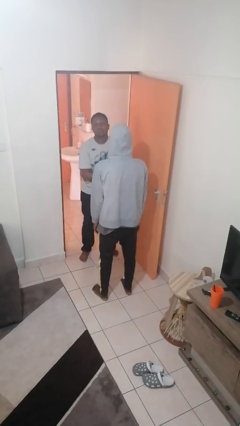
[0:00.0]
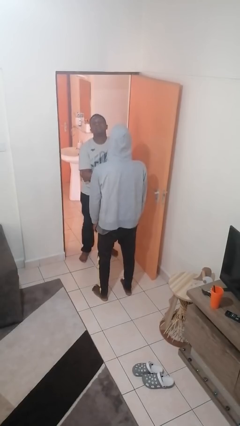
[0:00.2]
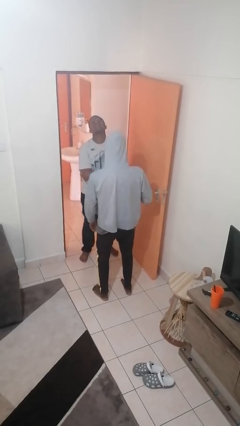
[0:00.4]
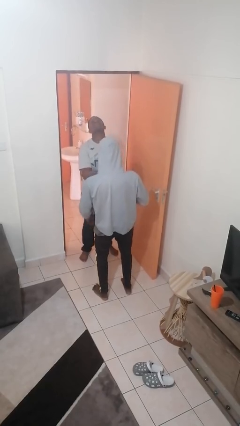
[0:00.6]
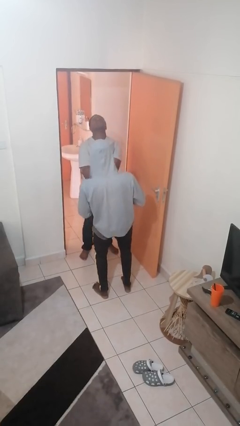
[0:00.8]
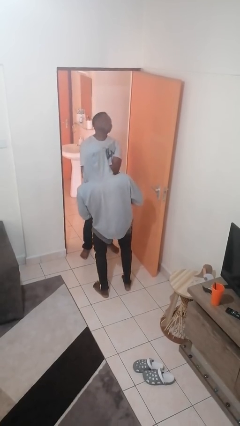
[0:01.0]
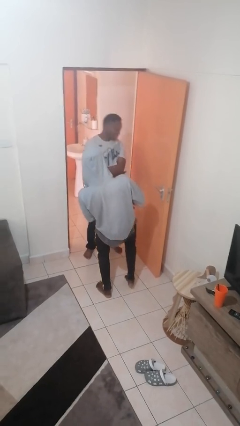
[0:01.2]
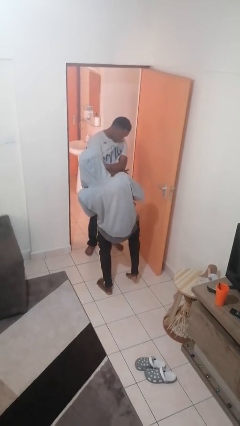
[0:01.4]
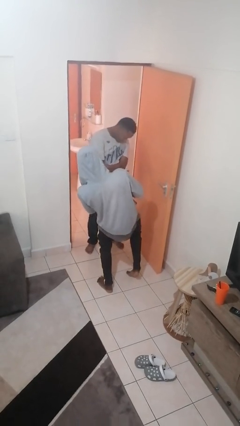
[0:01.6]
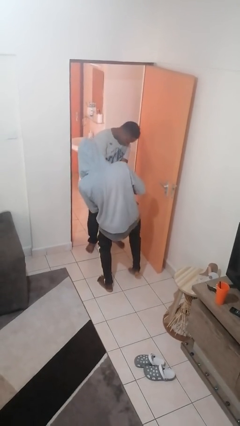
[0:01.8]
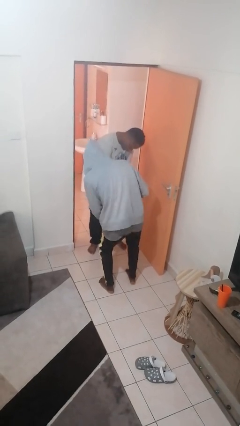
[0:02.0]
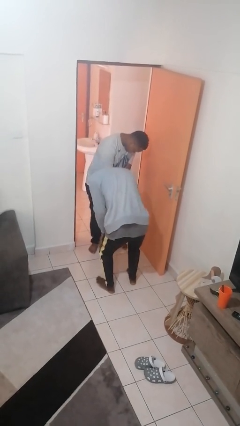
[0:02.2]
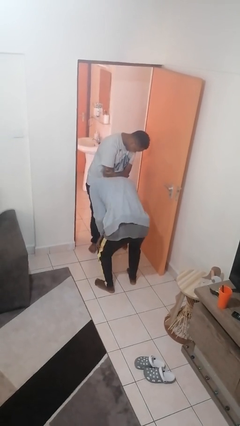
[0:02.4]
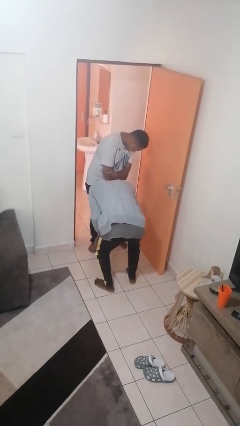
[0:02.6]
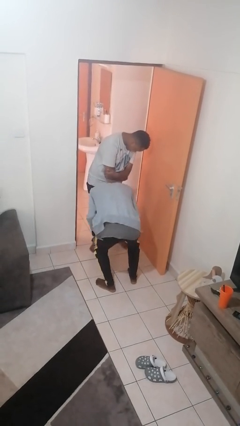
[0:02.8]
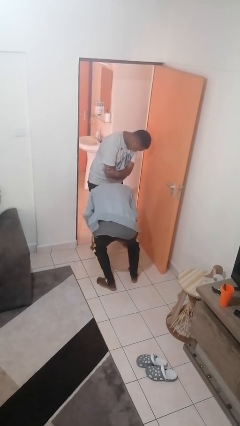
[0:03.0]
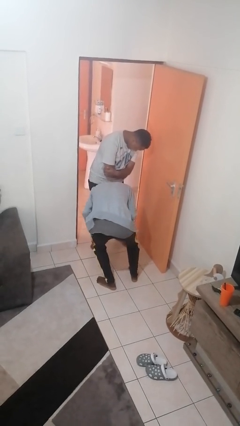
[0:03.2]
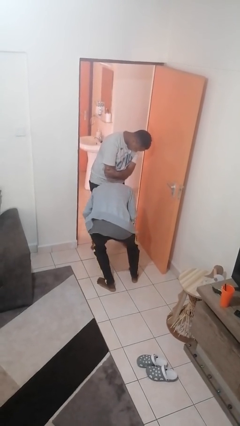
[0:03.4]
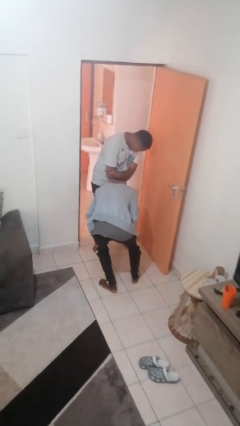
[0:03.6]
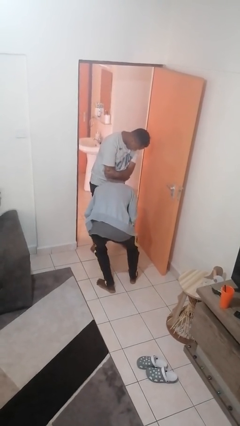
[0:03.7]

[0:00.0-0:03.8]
person laughs with person

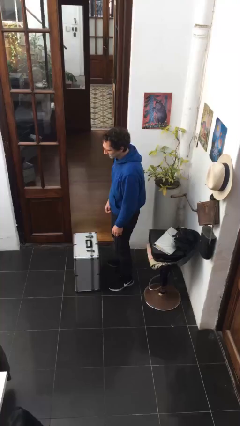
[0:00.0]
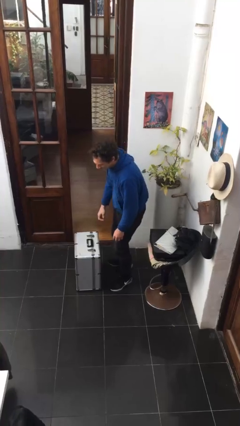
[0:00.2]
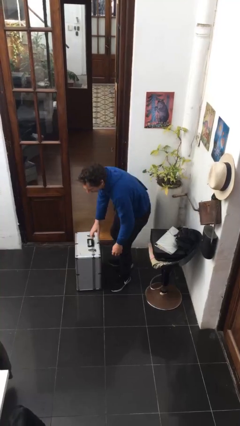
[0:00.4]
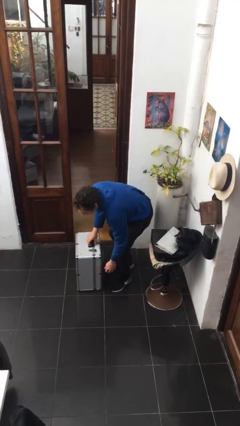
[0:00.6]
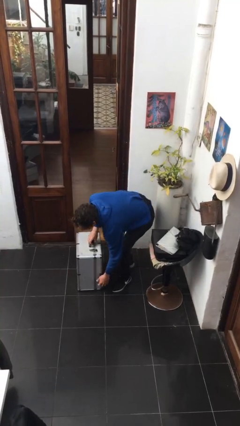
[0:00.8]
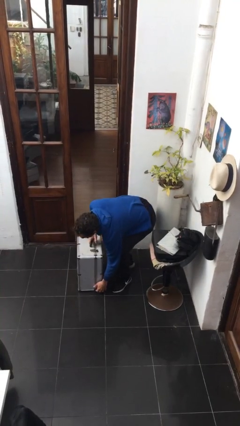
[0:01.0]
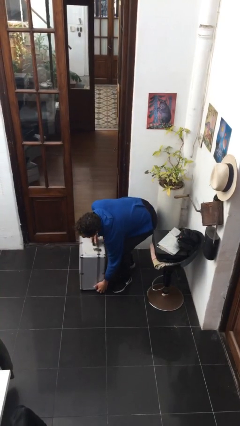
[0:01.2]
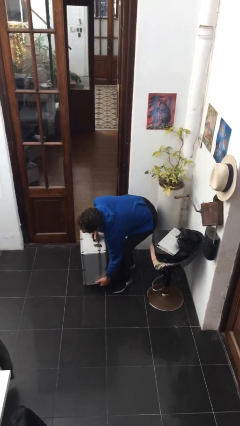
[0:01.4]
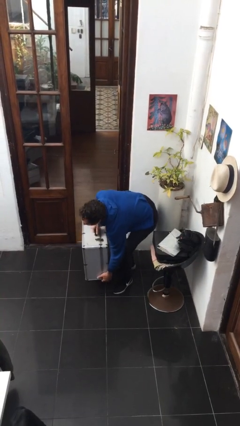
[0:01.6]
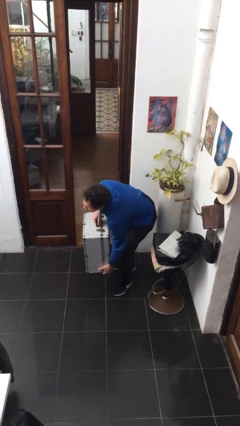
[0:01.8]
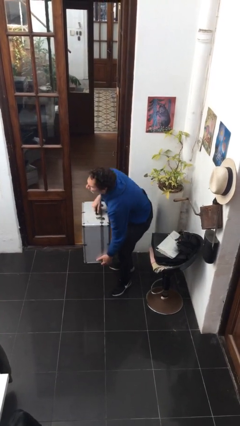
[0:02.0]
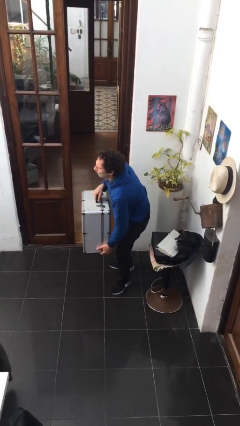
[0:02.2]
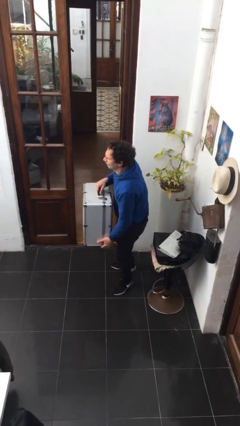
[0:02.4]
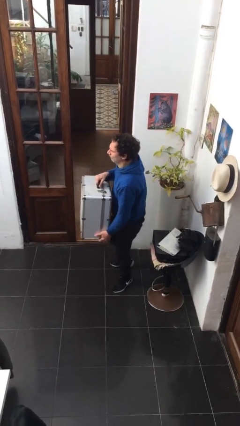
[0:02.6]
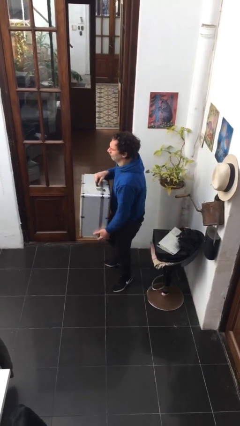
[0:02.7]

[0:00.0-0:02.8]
person picks up object from floor

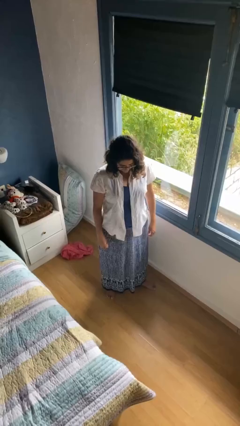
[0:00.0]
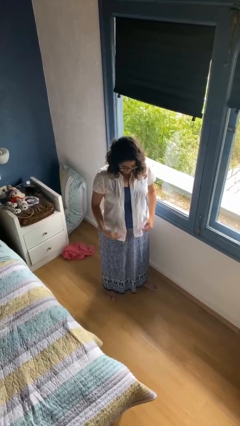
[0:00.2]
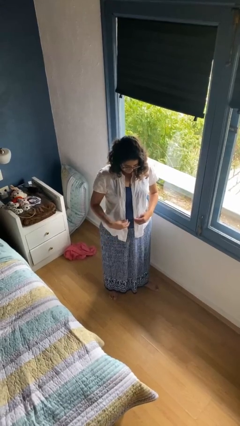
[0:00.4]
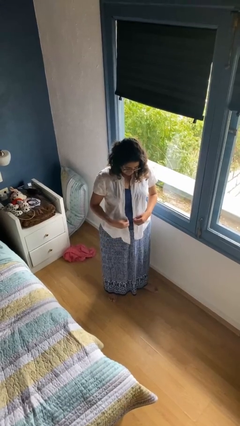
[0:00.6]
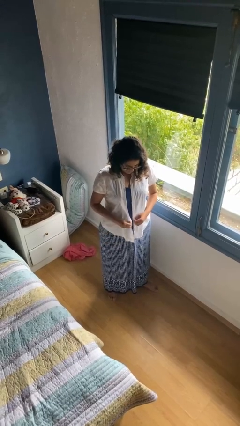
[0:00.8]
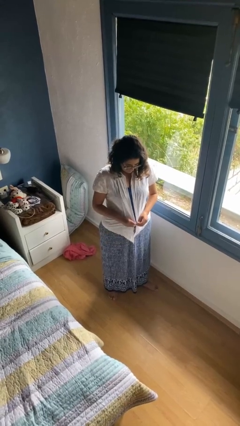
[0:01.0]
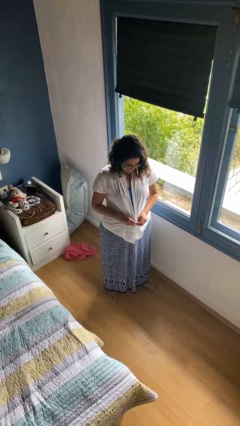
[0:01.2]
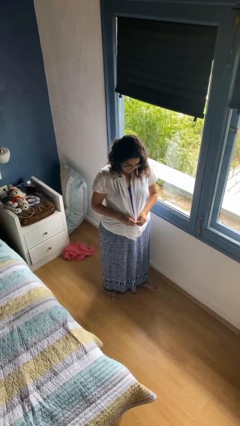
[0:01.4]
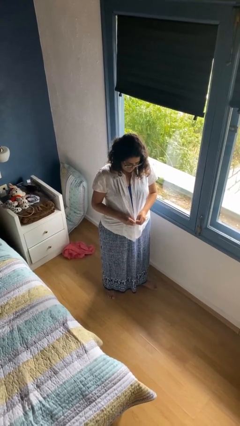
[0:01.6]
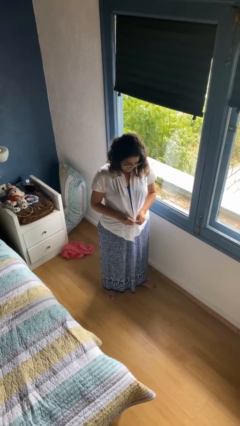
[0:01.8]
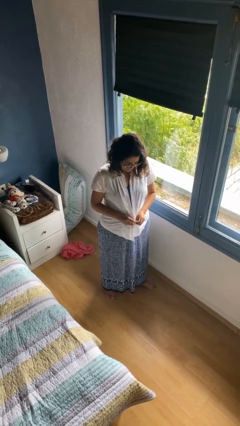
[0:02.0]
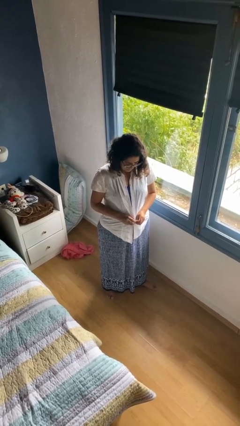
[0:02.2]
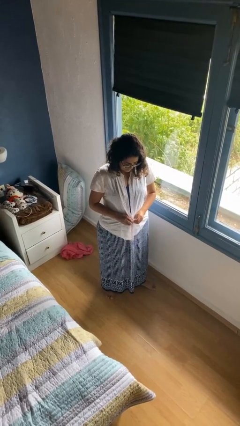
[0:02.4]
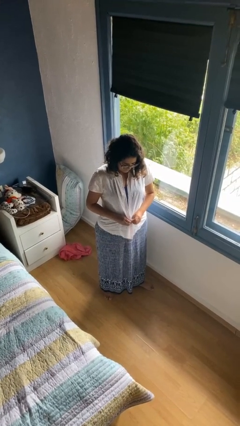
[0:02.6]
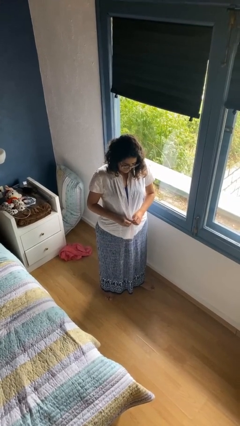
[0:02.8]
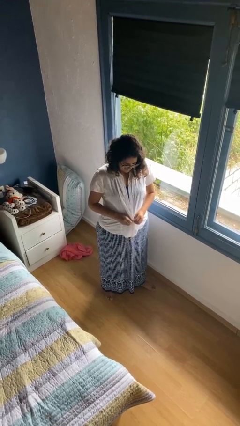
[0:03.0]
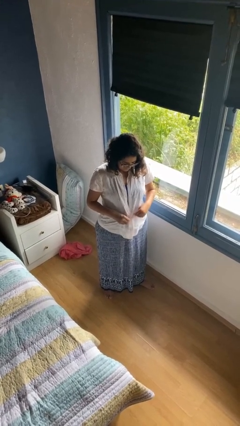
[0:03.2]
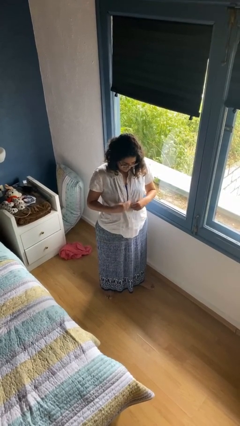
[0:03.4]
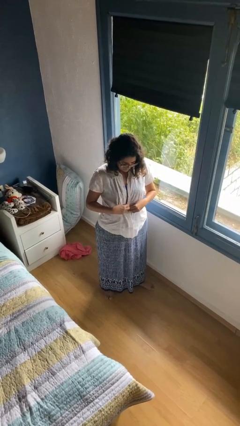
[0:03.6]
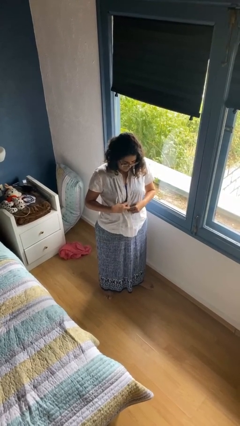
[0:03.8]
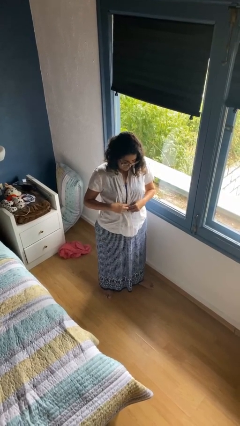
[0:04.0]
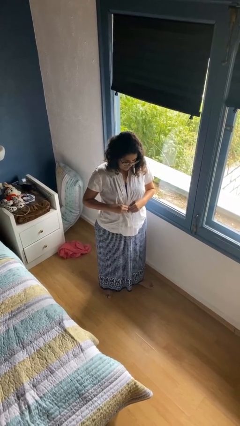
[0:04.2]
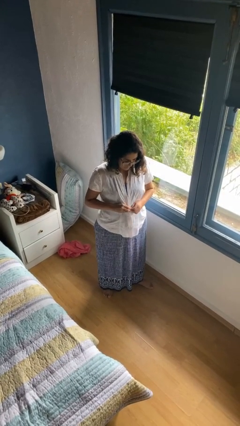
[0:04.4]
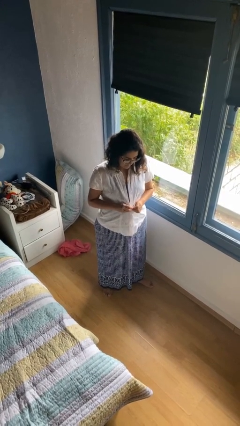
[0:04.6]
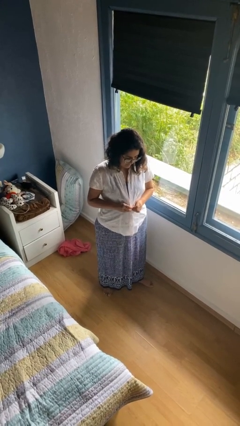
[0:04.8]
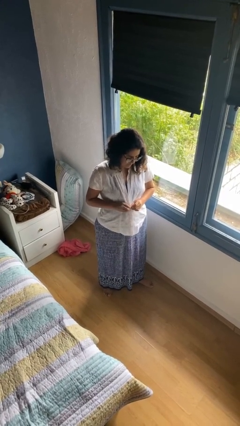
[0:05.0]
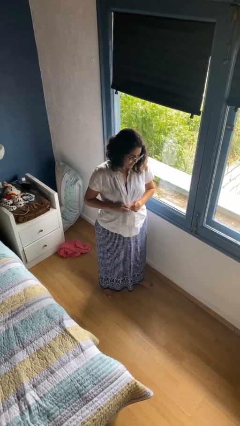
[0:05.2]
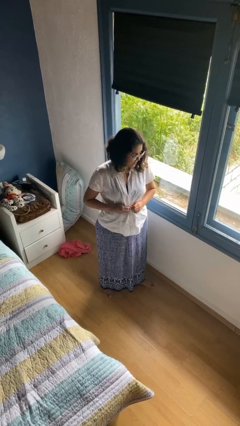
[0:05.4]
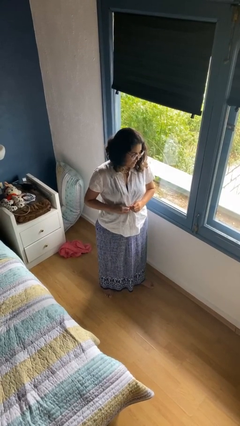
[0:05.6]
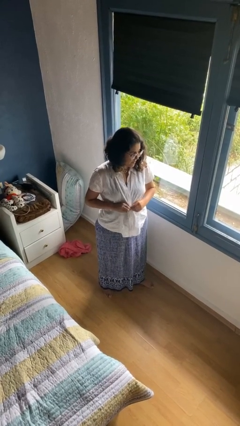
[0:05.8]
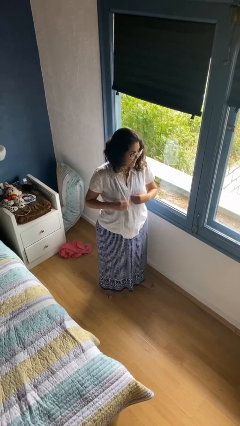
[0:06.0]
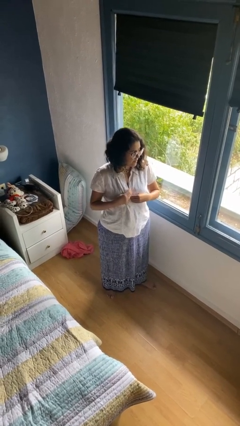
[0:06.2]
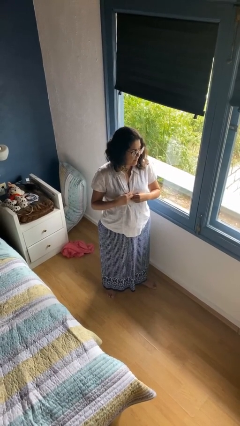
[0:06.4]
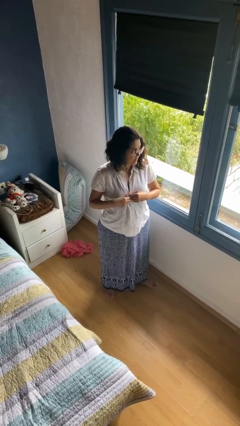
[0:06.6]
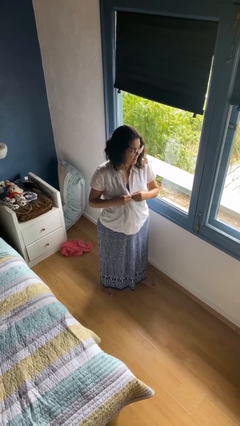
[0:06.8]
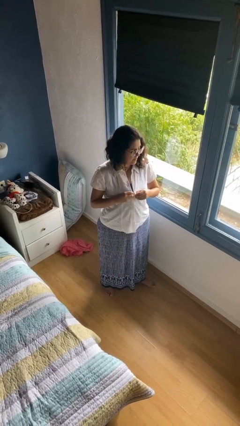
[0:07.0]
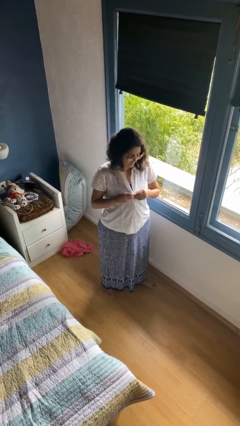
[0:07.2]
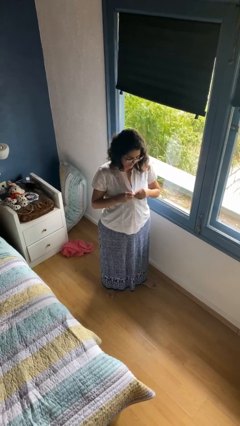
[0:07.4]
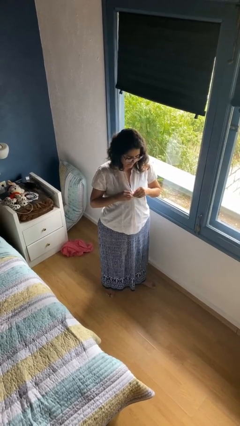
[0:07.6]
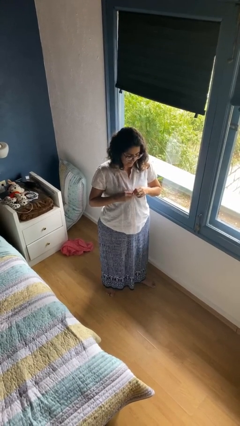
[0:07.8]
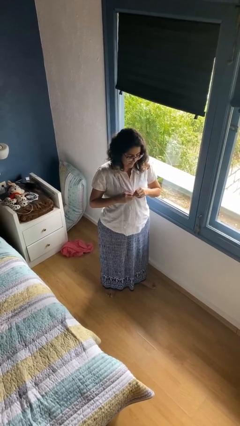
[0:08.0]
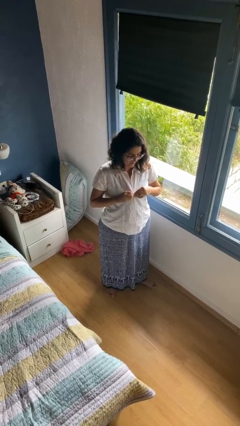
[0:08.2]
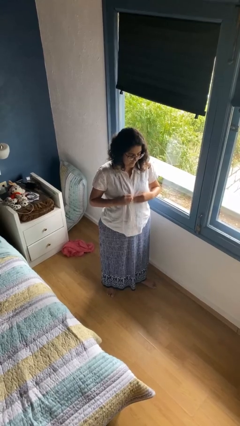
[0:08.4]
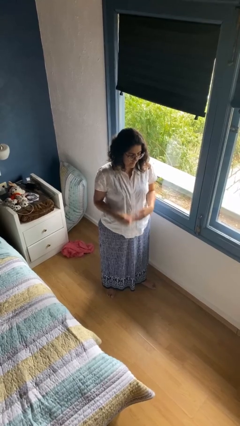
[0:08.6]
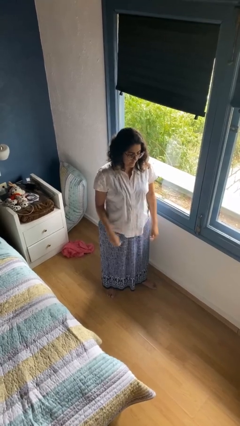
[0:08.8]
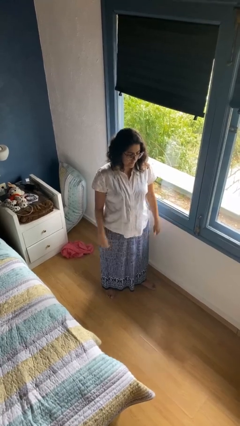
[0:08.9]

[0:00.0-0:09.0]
person buttons shirt

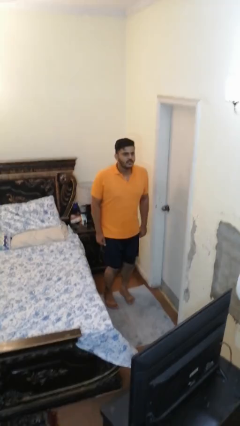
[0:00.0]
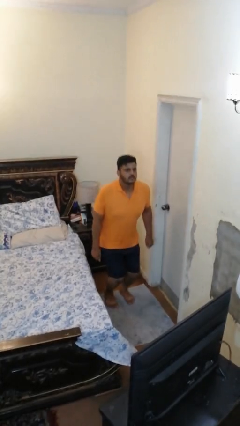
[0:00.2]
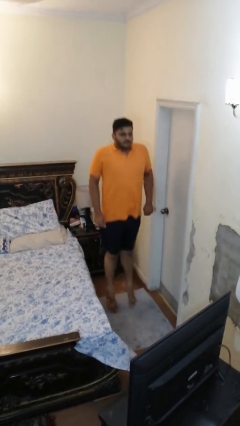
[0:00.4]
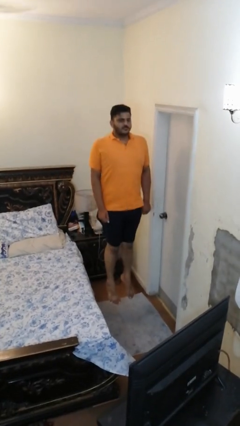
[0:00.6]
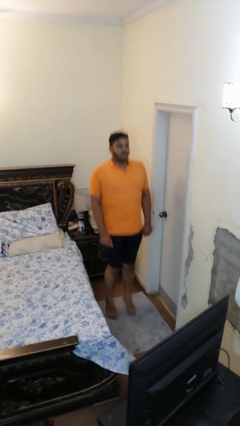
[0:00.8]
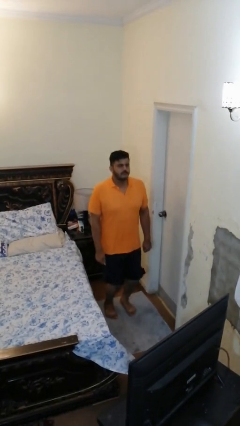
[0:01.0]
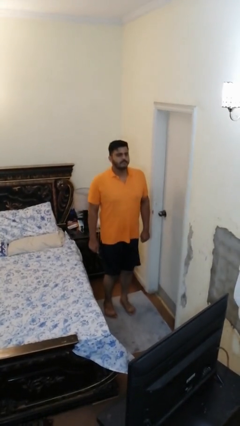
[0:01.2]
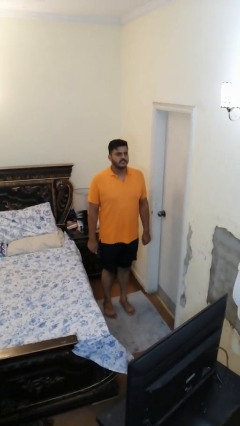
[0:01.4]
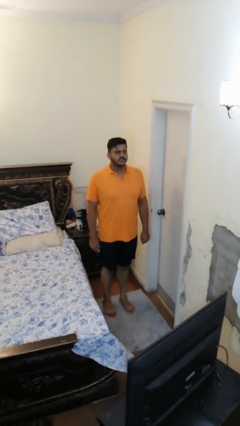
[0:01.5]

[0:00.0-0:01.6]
person jumps

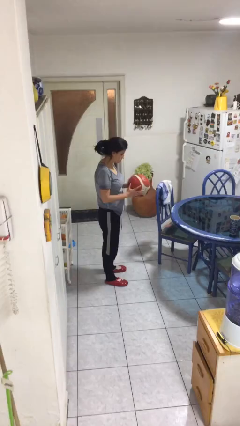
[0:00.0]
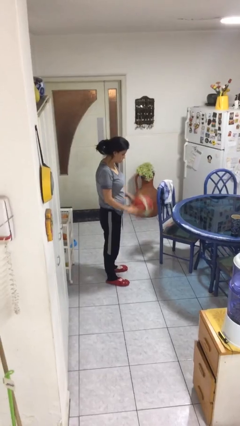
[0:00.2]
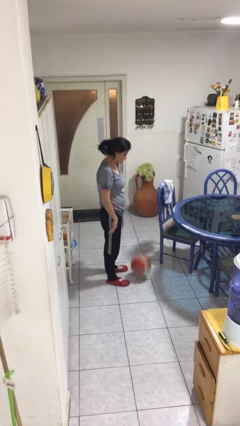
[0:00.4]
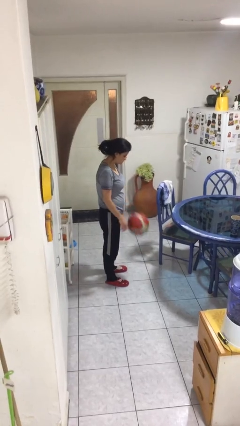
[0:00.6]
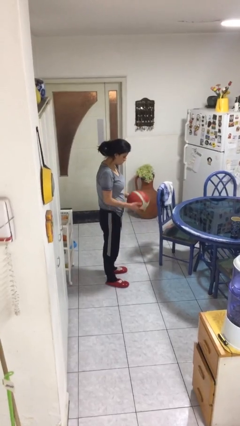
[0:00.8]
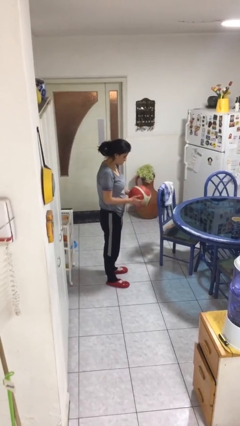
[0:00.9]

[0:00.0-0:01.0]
person bounces ball on floor
